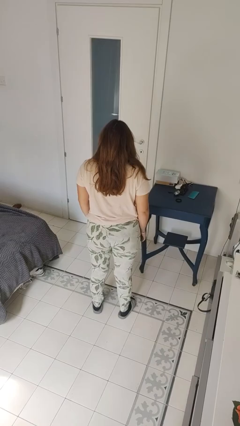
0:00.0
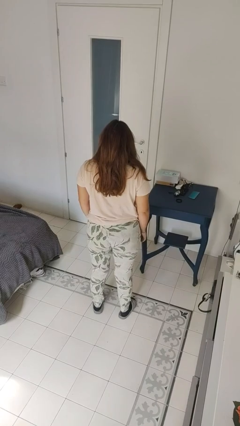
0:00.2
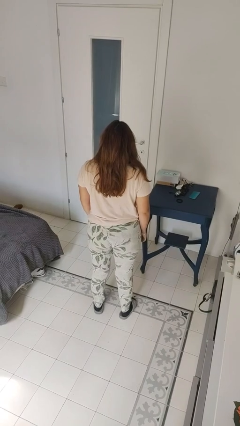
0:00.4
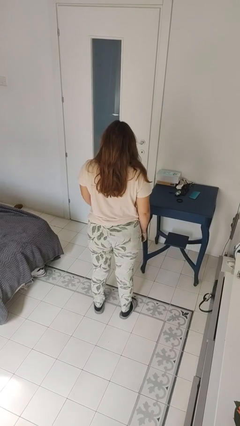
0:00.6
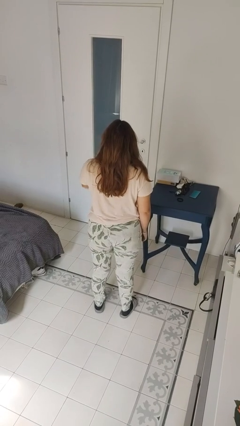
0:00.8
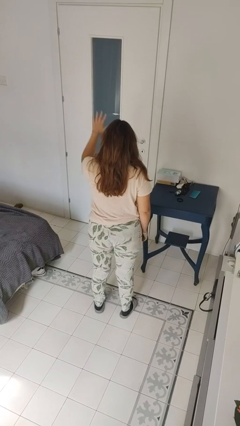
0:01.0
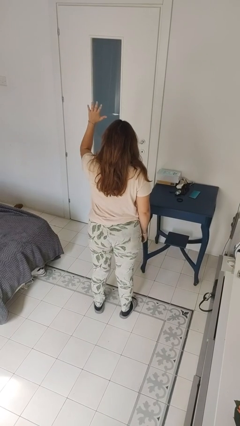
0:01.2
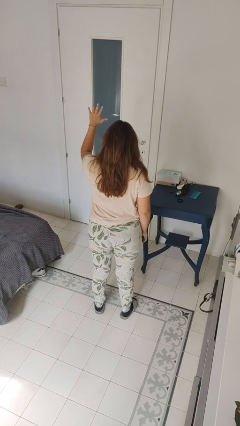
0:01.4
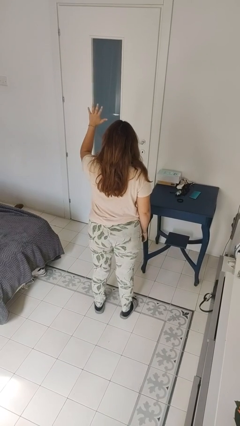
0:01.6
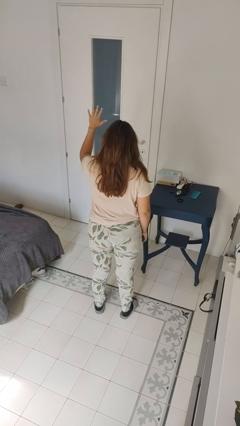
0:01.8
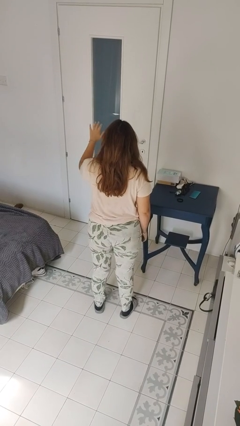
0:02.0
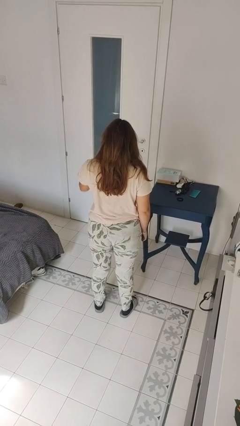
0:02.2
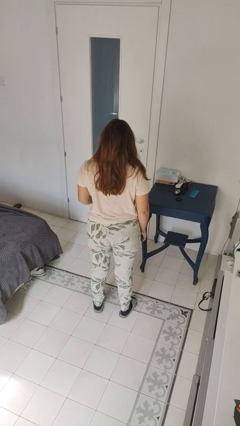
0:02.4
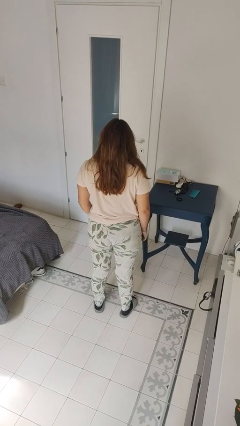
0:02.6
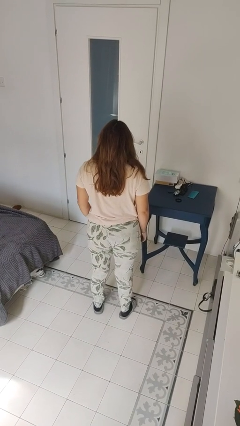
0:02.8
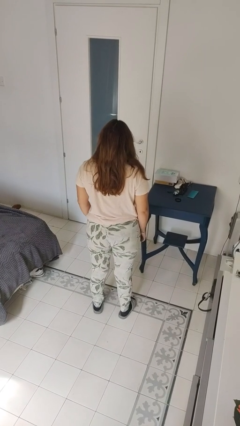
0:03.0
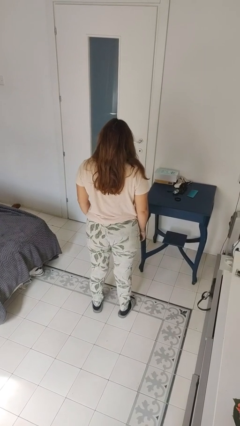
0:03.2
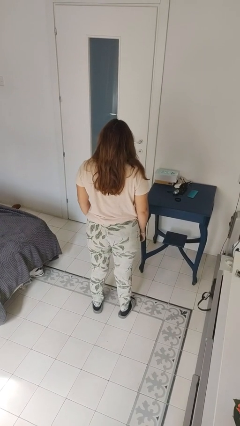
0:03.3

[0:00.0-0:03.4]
person gestures number five

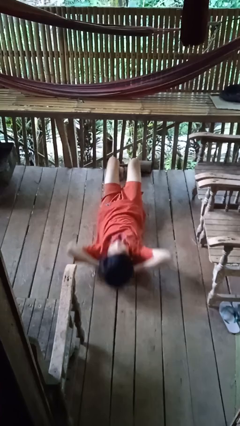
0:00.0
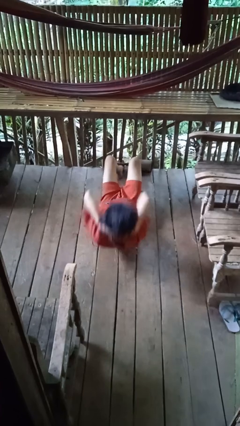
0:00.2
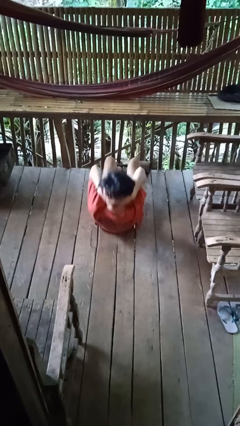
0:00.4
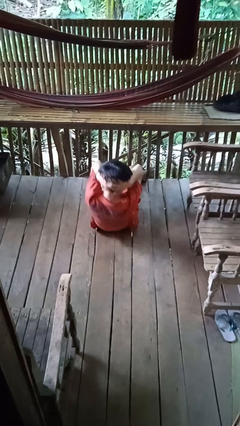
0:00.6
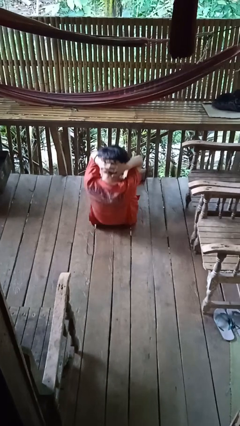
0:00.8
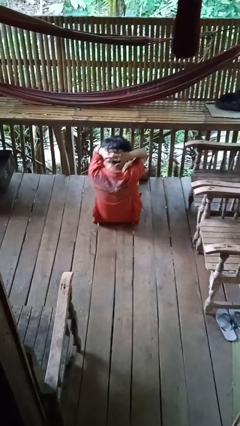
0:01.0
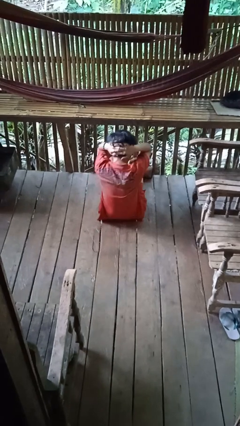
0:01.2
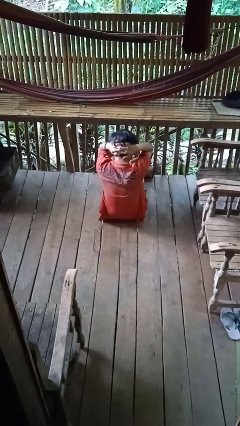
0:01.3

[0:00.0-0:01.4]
person exercises with situp

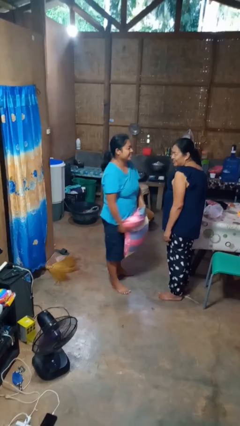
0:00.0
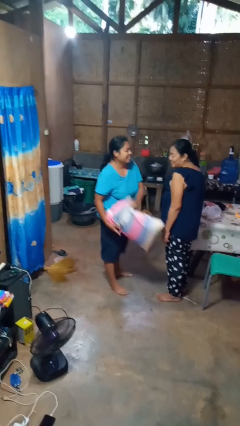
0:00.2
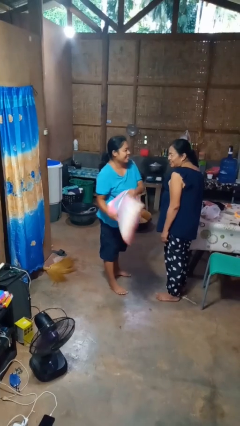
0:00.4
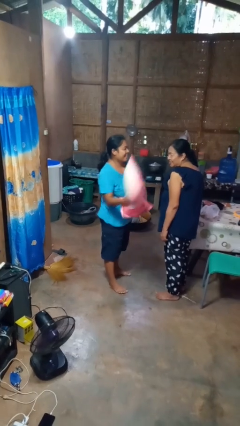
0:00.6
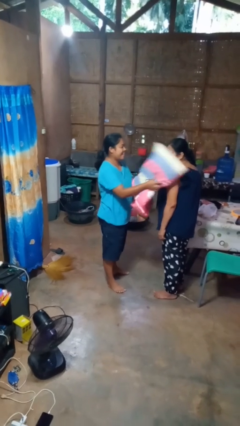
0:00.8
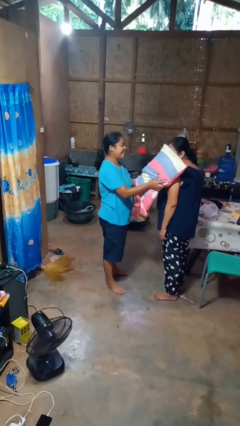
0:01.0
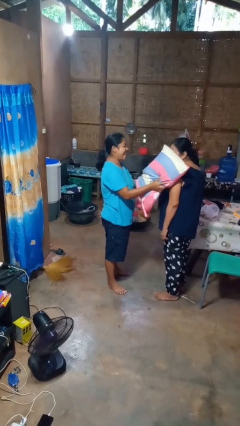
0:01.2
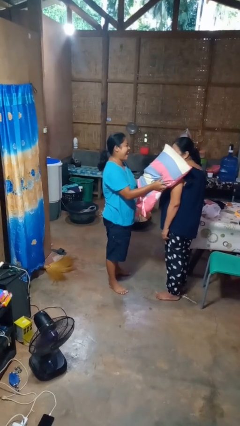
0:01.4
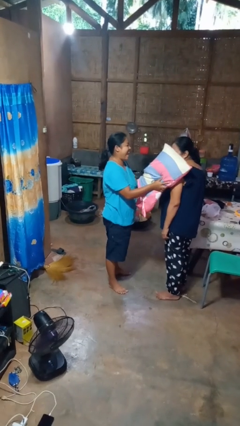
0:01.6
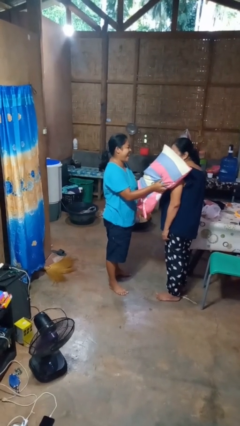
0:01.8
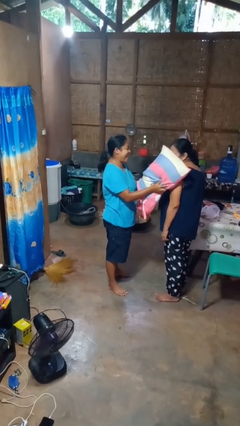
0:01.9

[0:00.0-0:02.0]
person hits person with pillow

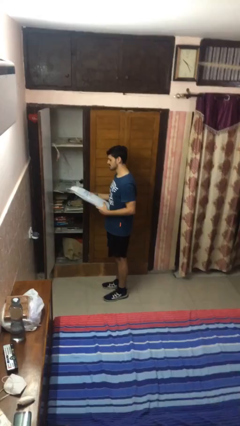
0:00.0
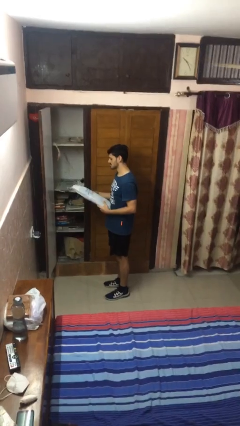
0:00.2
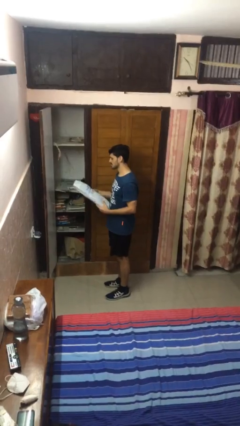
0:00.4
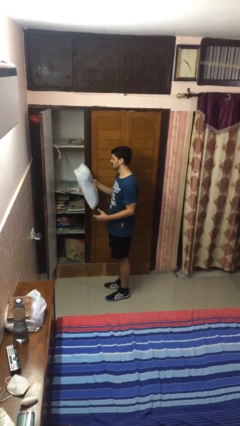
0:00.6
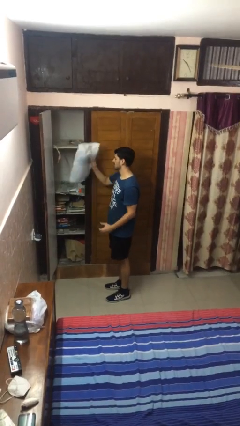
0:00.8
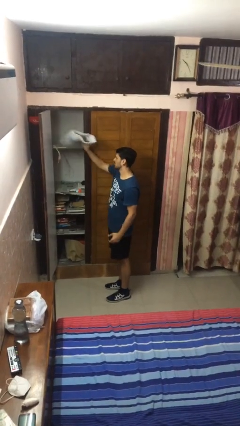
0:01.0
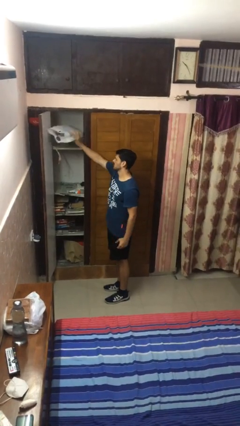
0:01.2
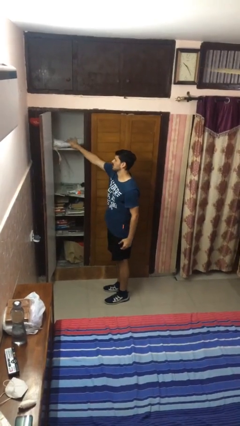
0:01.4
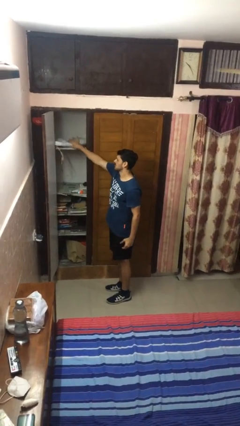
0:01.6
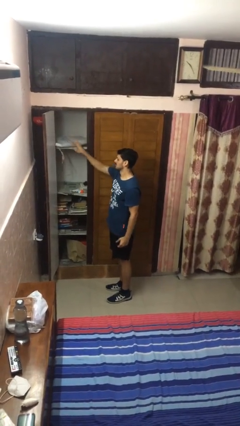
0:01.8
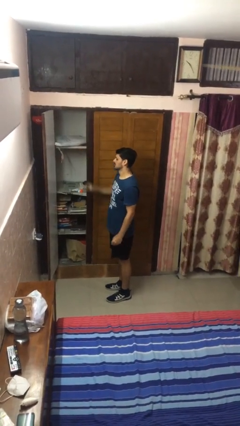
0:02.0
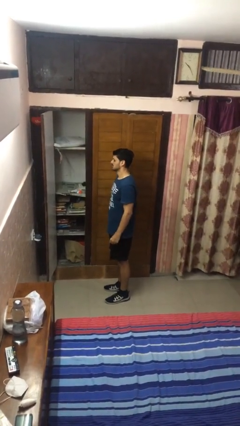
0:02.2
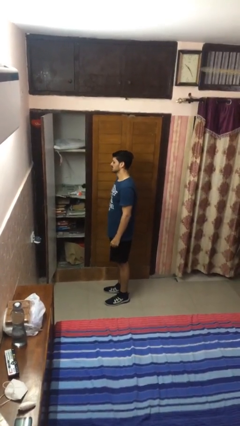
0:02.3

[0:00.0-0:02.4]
person puts down object on shelf

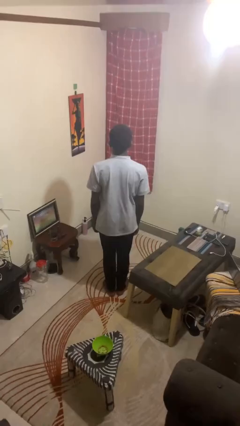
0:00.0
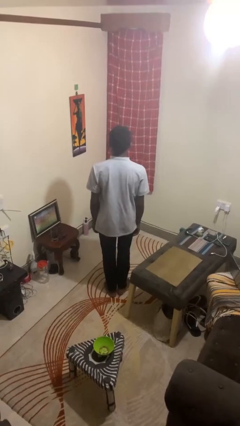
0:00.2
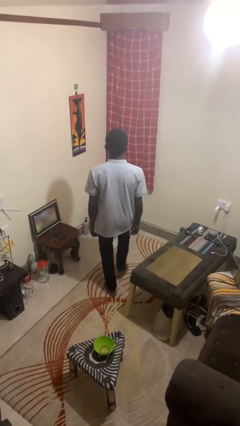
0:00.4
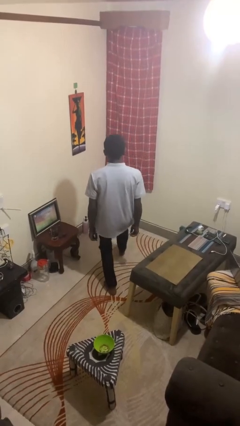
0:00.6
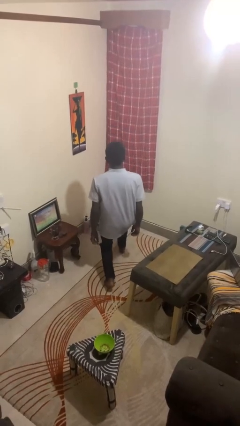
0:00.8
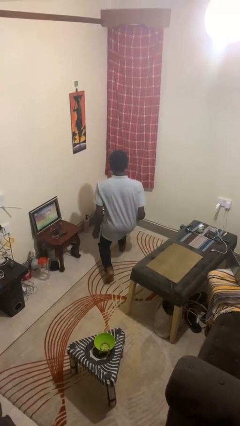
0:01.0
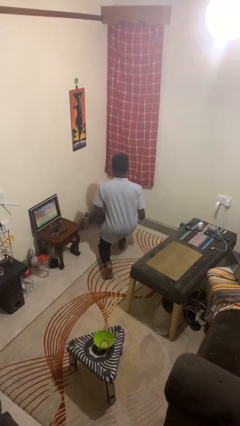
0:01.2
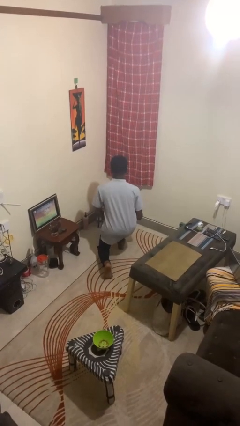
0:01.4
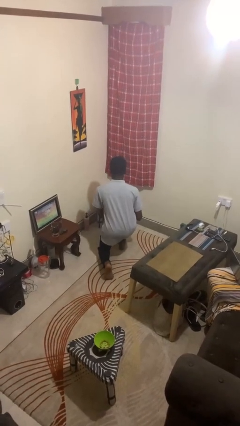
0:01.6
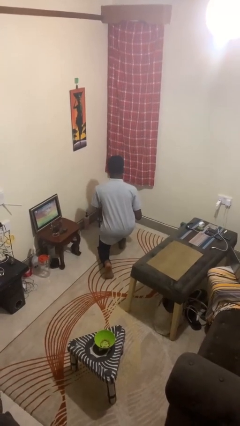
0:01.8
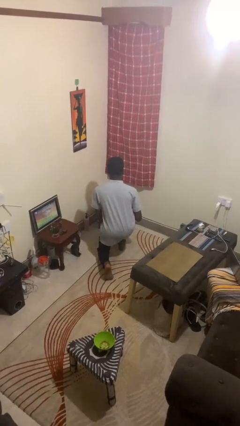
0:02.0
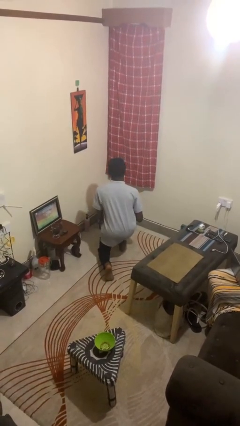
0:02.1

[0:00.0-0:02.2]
person exercises with lunges

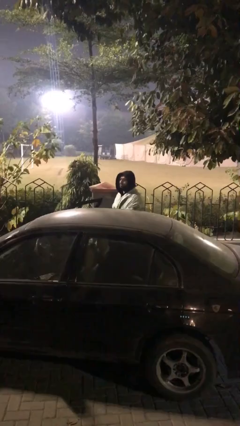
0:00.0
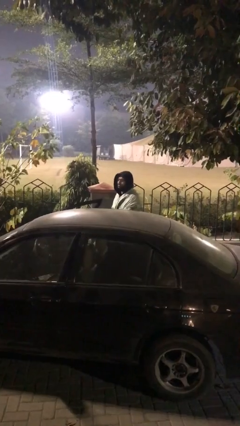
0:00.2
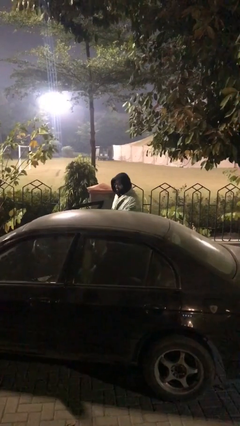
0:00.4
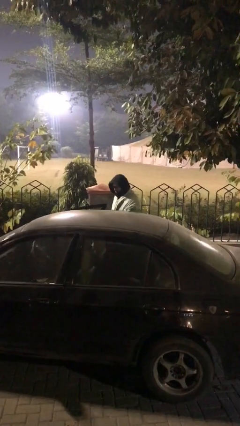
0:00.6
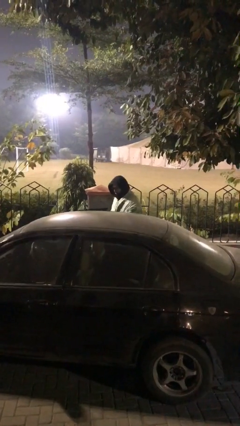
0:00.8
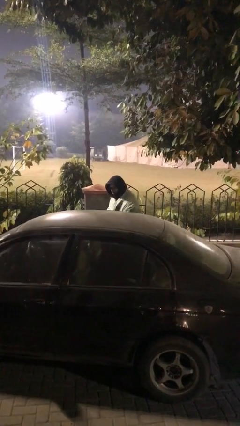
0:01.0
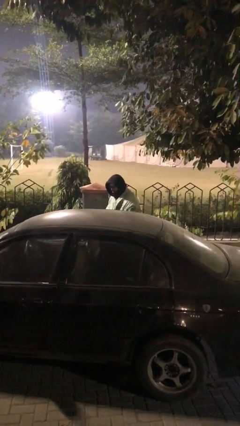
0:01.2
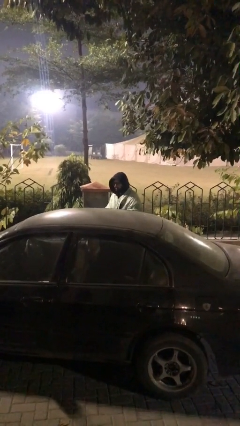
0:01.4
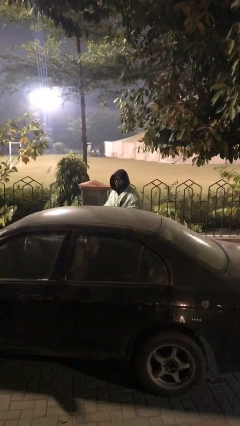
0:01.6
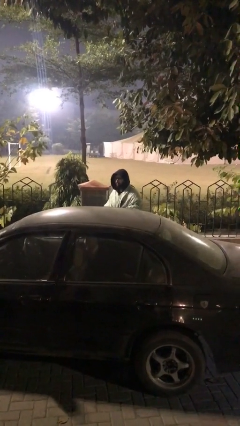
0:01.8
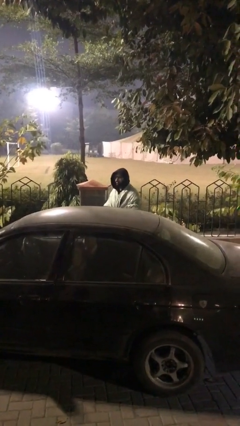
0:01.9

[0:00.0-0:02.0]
person closes car door

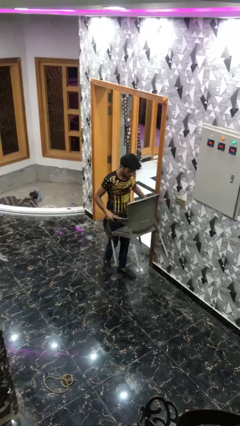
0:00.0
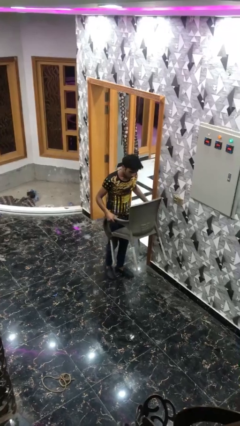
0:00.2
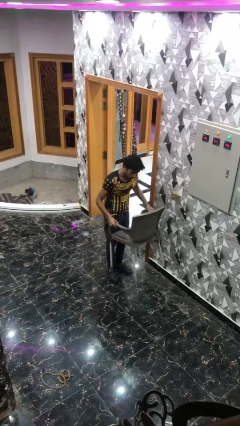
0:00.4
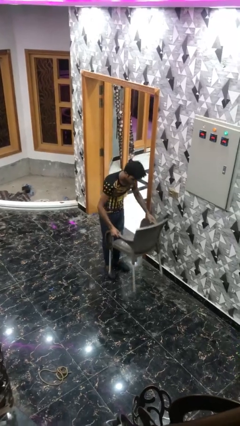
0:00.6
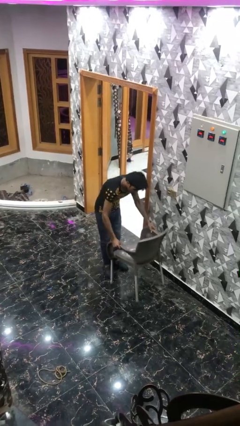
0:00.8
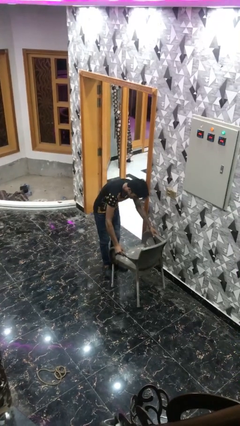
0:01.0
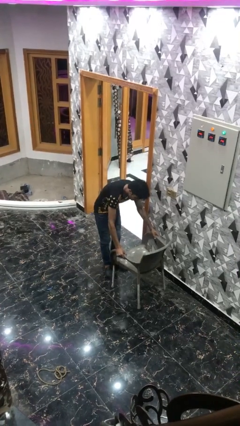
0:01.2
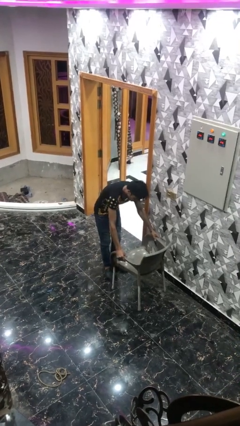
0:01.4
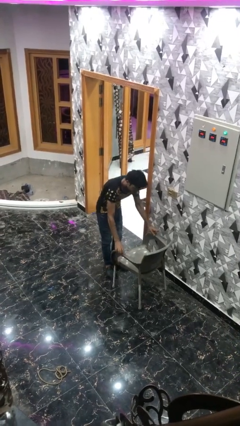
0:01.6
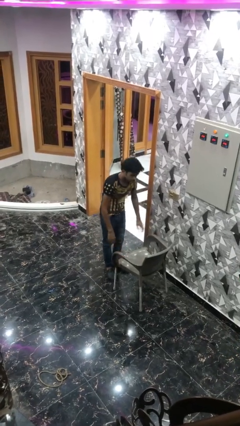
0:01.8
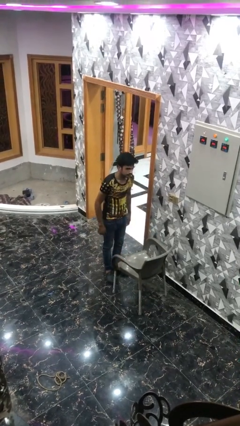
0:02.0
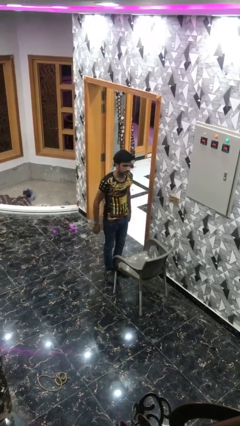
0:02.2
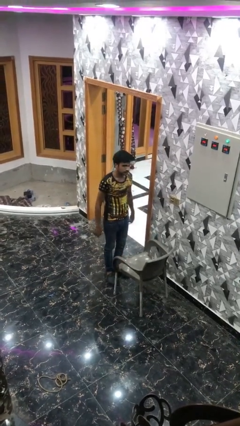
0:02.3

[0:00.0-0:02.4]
person puts down object on floor

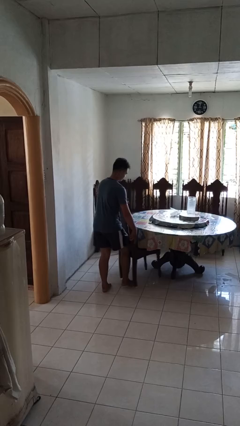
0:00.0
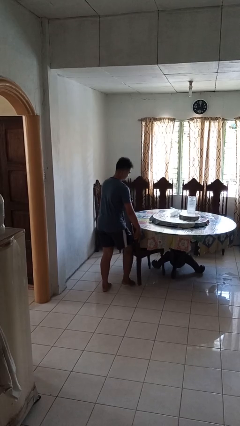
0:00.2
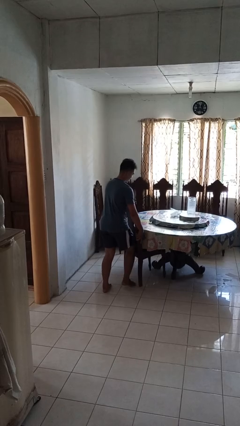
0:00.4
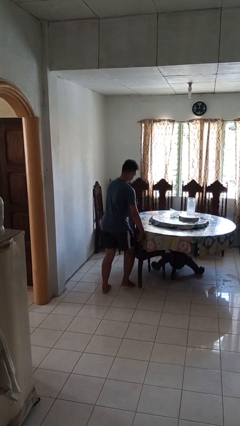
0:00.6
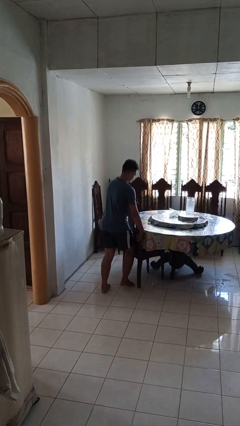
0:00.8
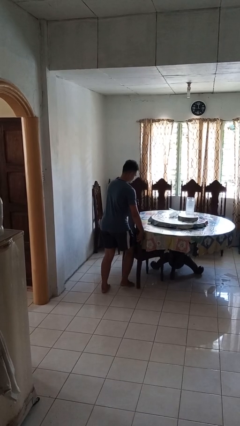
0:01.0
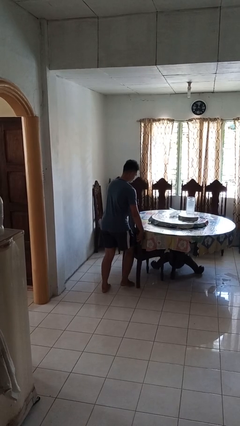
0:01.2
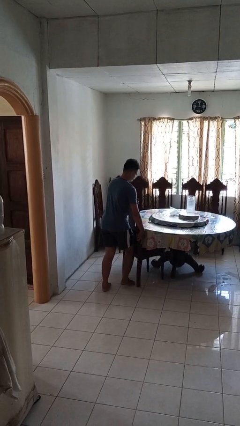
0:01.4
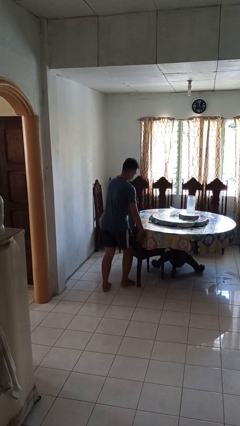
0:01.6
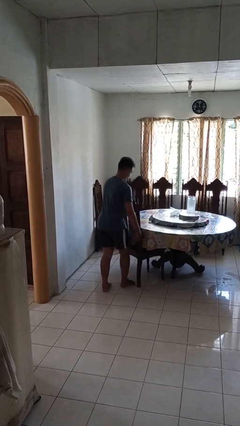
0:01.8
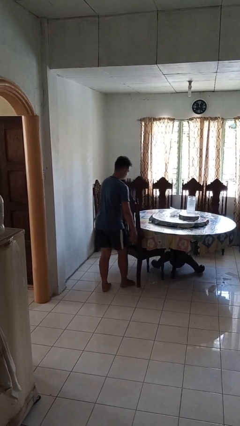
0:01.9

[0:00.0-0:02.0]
person pushes in chair
